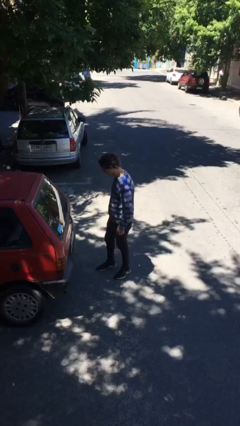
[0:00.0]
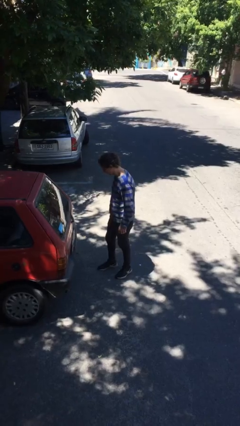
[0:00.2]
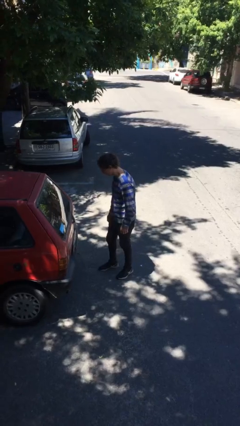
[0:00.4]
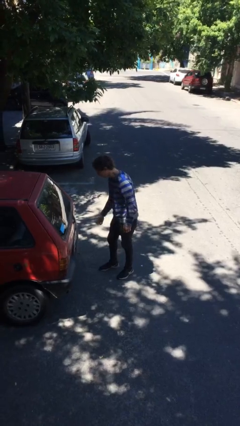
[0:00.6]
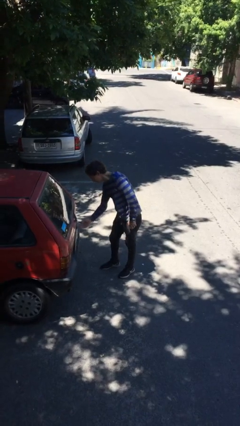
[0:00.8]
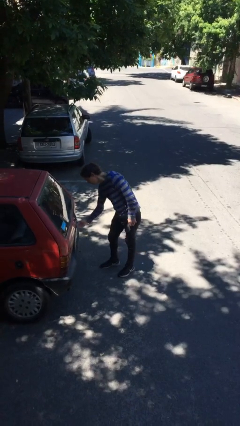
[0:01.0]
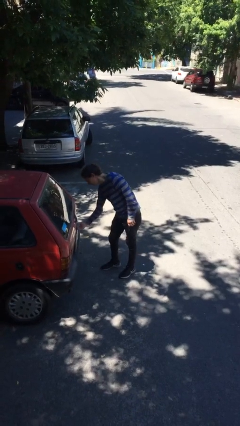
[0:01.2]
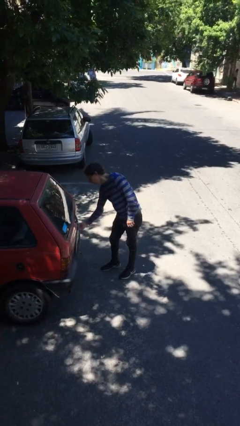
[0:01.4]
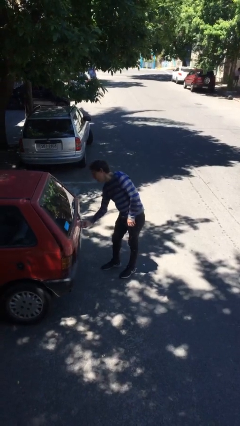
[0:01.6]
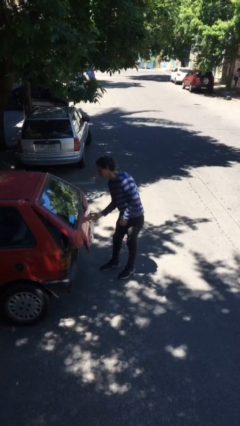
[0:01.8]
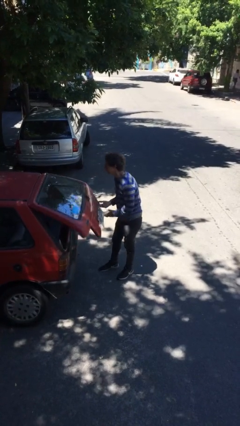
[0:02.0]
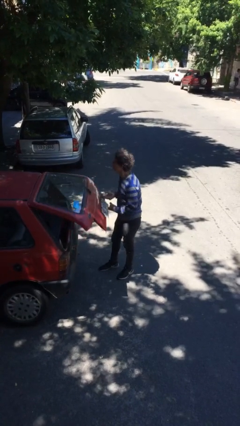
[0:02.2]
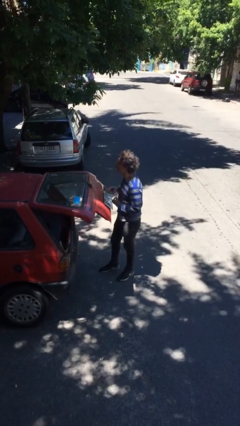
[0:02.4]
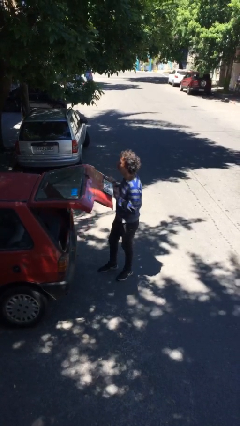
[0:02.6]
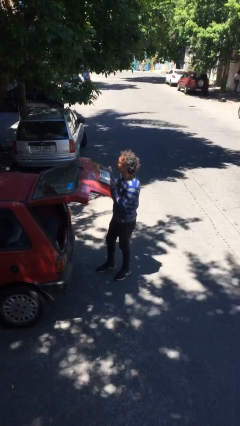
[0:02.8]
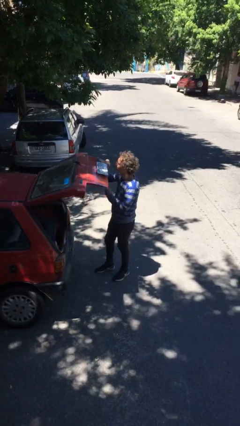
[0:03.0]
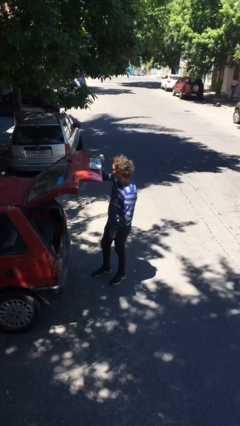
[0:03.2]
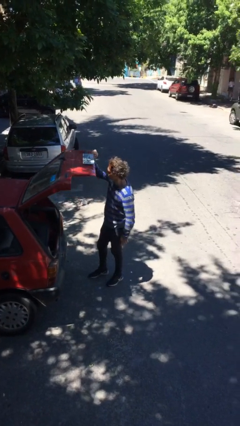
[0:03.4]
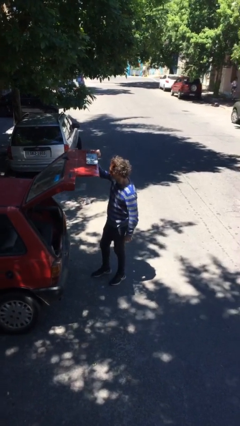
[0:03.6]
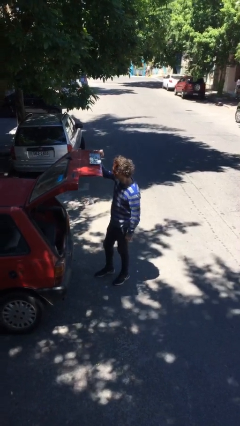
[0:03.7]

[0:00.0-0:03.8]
person opens car trunk

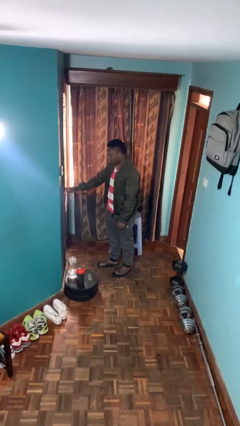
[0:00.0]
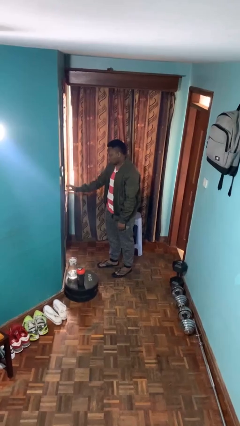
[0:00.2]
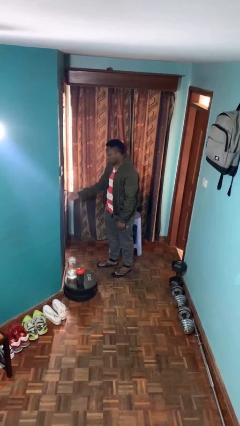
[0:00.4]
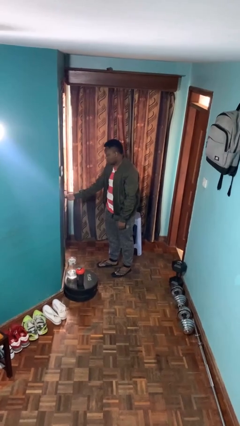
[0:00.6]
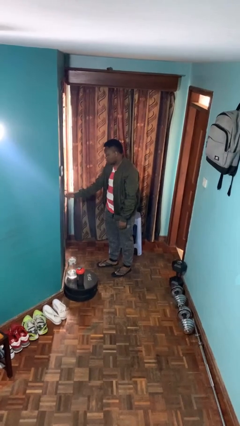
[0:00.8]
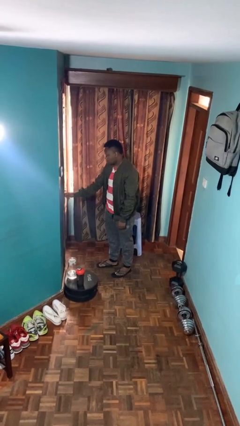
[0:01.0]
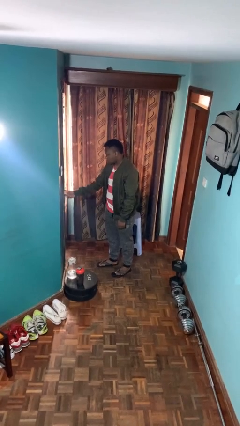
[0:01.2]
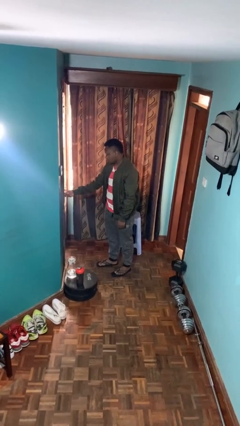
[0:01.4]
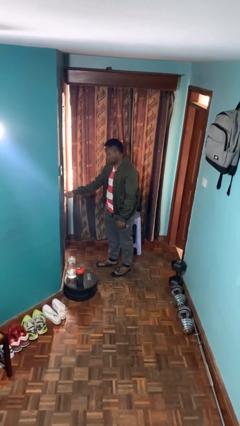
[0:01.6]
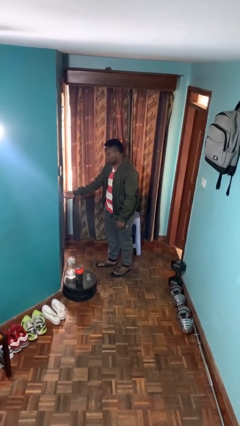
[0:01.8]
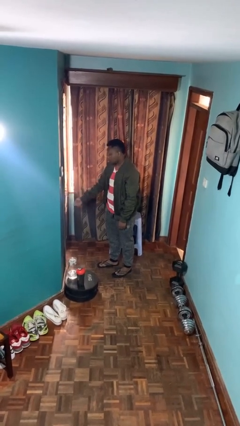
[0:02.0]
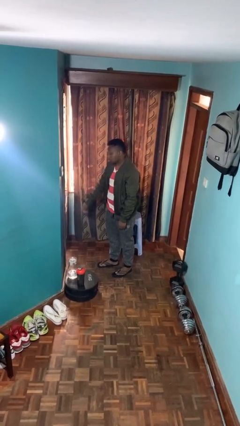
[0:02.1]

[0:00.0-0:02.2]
person locks door with keys

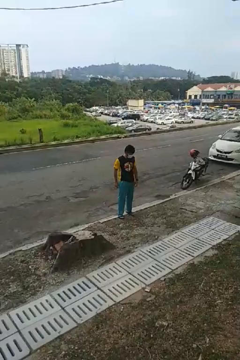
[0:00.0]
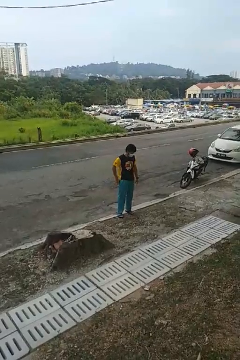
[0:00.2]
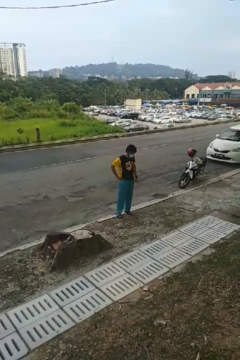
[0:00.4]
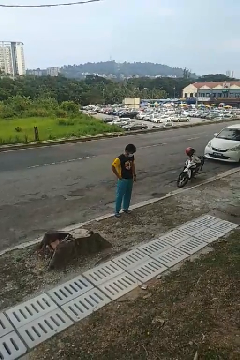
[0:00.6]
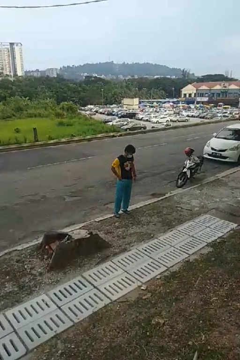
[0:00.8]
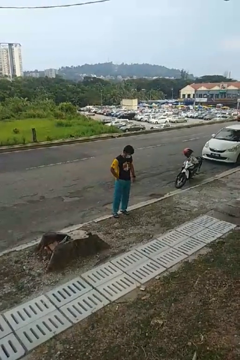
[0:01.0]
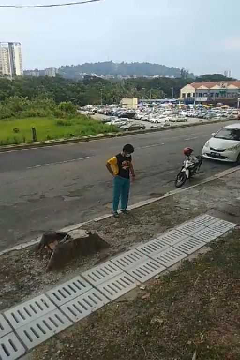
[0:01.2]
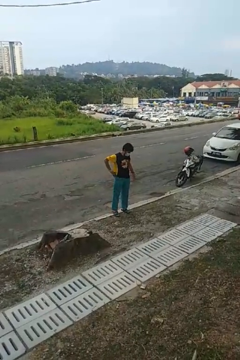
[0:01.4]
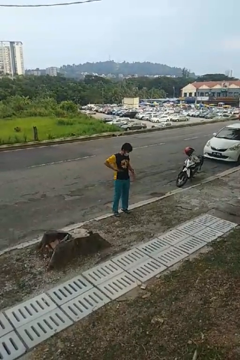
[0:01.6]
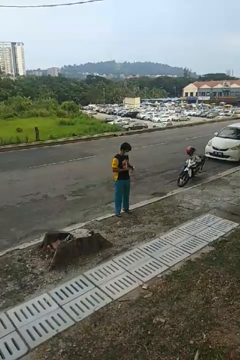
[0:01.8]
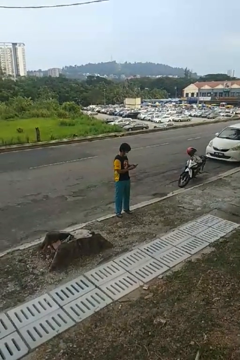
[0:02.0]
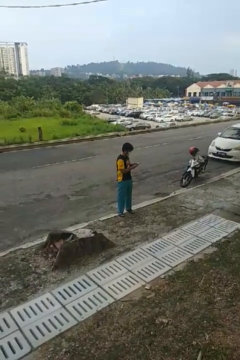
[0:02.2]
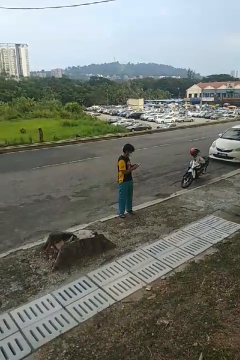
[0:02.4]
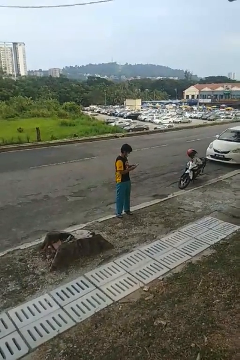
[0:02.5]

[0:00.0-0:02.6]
person takes phone from pocket

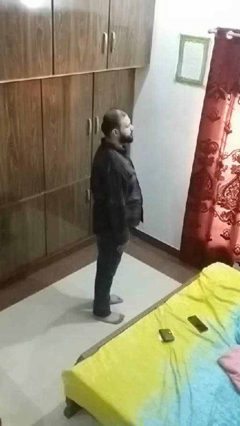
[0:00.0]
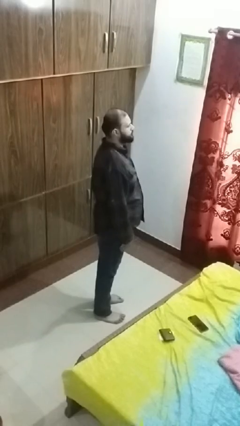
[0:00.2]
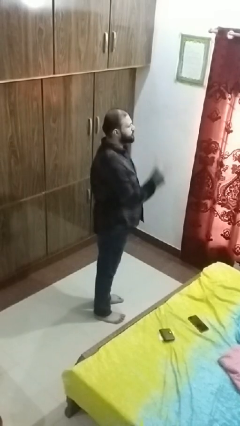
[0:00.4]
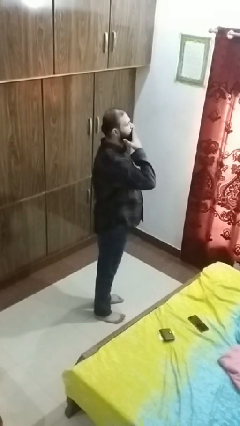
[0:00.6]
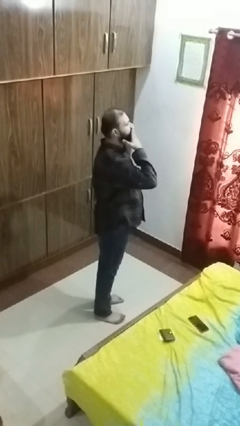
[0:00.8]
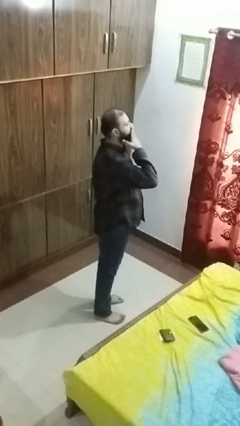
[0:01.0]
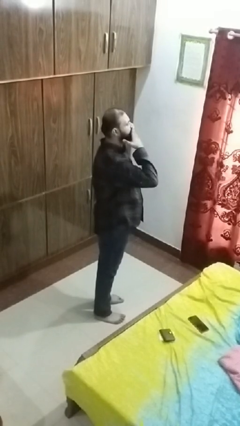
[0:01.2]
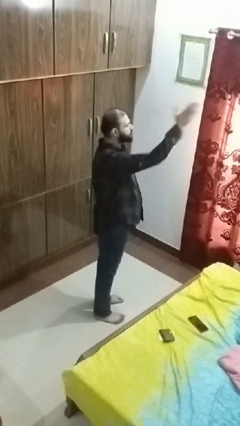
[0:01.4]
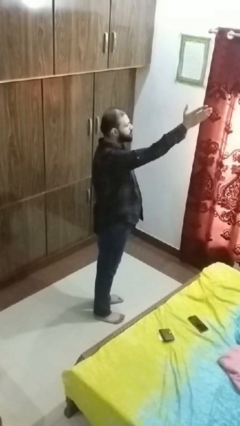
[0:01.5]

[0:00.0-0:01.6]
person gestures blow kiss

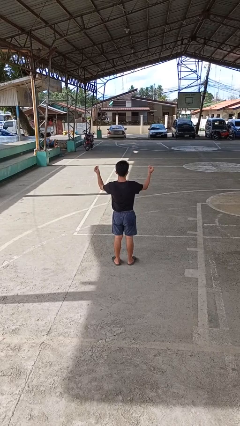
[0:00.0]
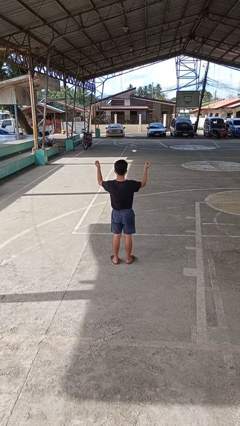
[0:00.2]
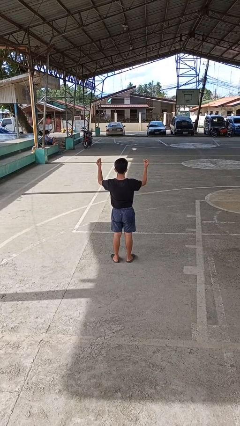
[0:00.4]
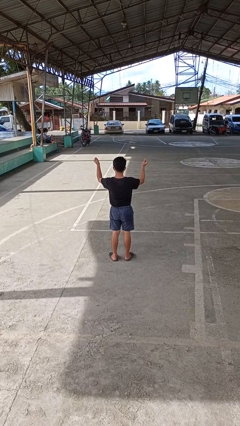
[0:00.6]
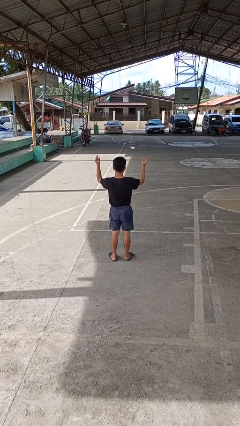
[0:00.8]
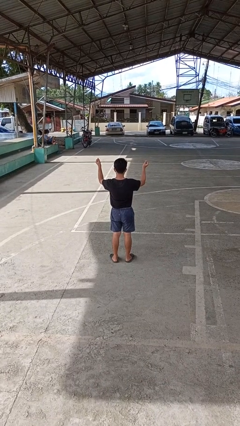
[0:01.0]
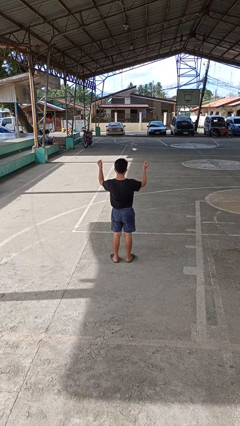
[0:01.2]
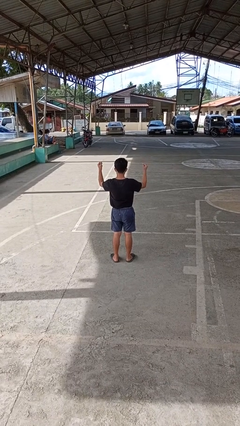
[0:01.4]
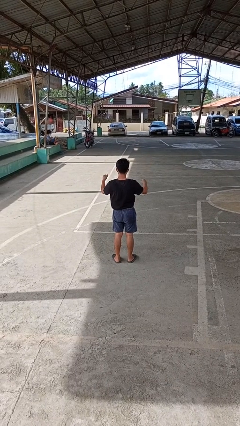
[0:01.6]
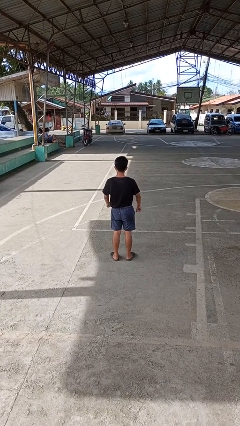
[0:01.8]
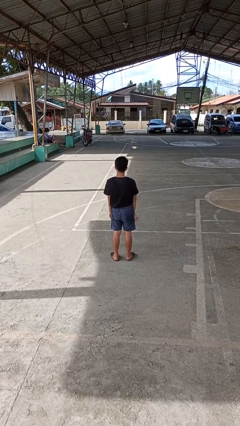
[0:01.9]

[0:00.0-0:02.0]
person snaps fingers

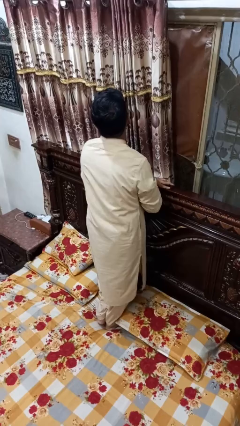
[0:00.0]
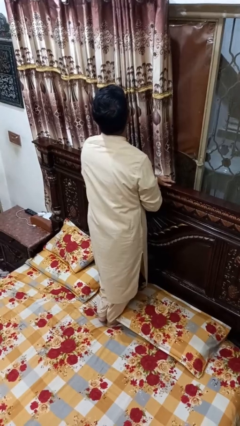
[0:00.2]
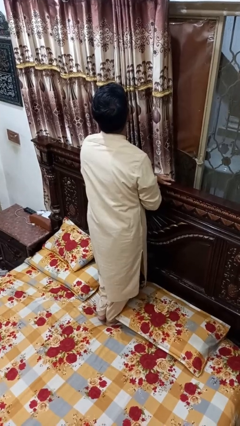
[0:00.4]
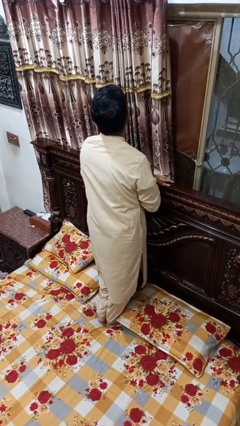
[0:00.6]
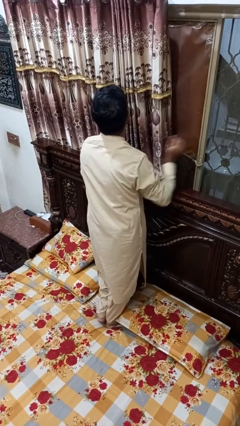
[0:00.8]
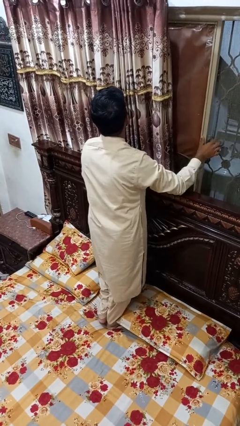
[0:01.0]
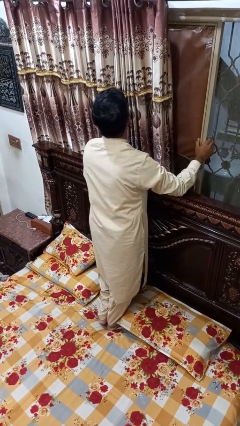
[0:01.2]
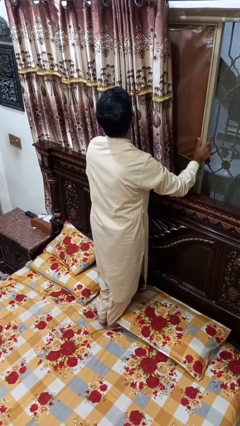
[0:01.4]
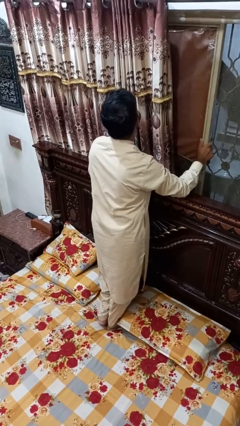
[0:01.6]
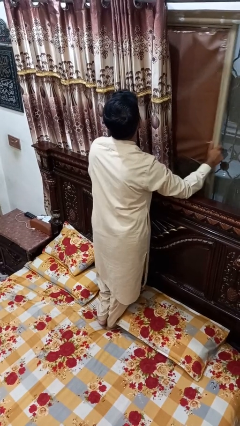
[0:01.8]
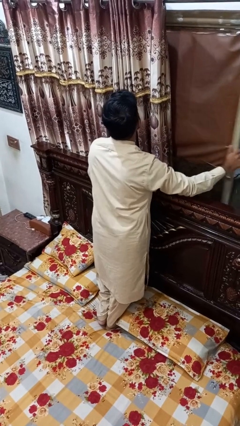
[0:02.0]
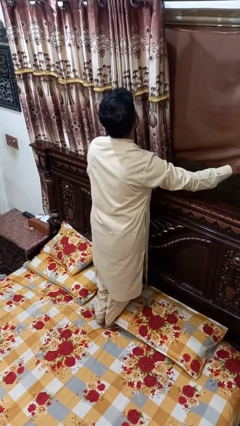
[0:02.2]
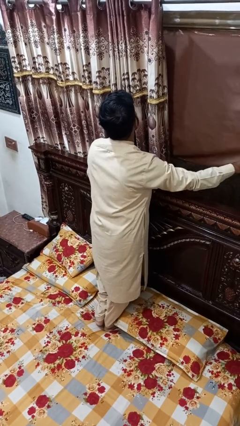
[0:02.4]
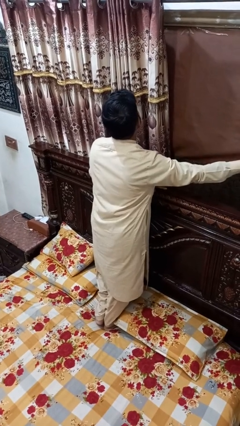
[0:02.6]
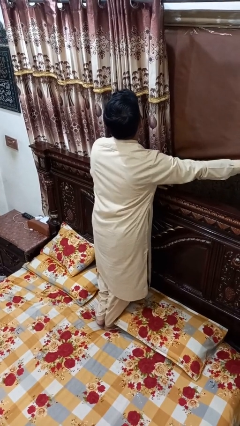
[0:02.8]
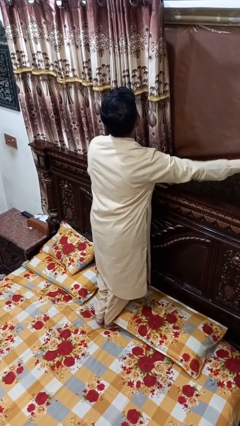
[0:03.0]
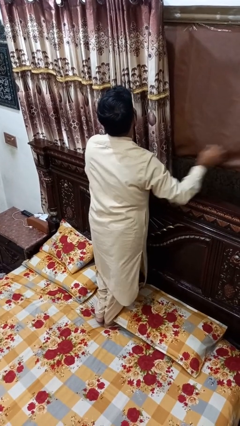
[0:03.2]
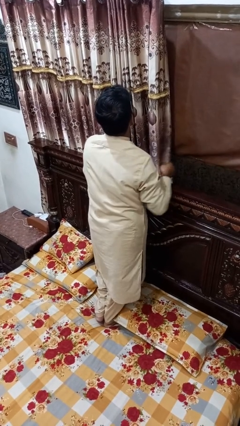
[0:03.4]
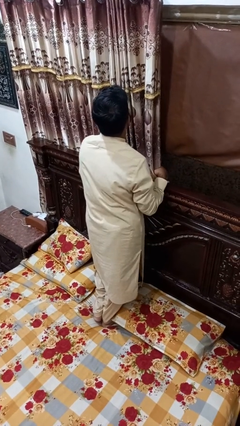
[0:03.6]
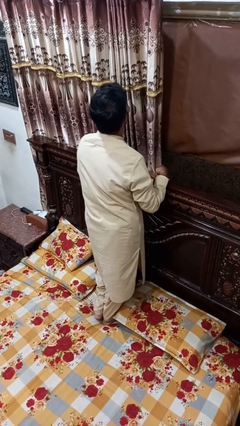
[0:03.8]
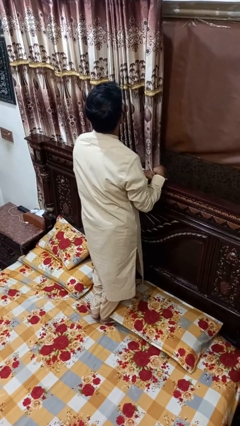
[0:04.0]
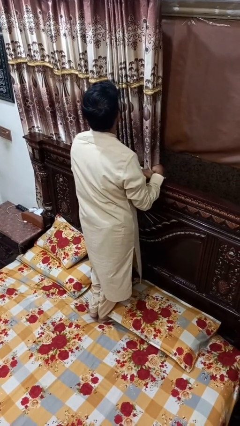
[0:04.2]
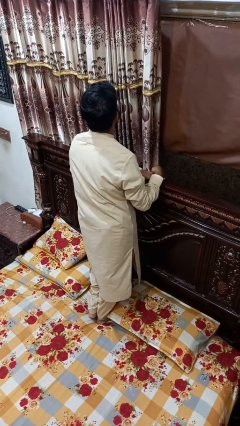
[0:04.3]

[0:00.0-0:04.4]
person closes home window

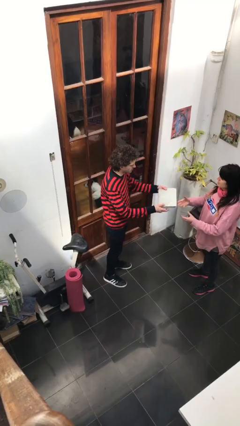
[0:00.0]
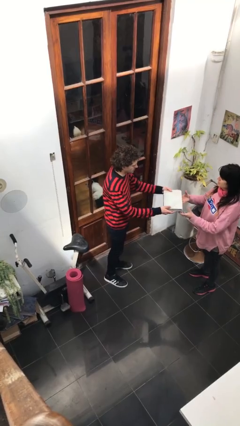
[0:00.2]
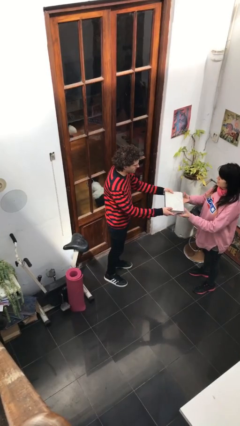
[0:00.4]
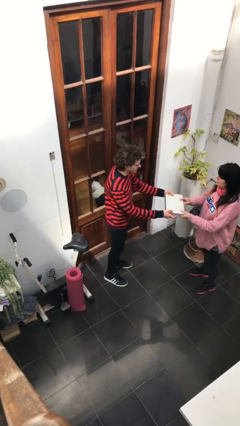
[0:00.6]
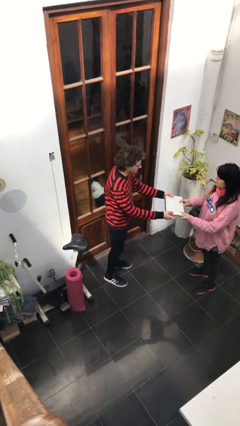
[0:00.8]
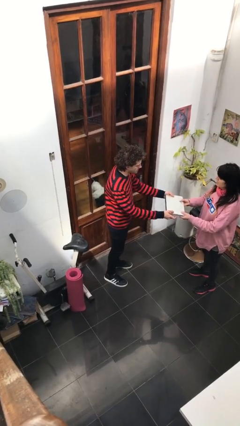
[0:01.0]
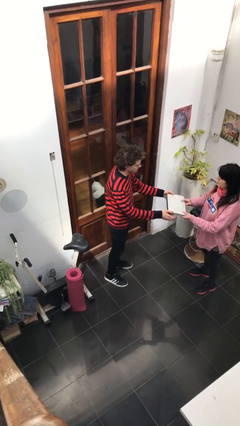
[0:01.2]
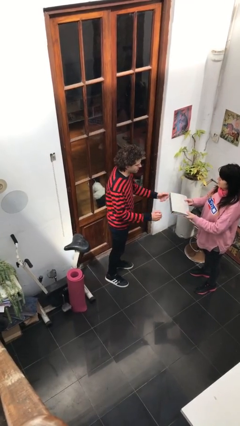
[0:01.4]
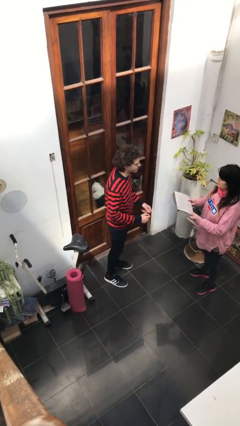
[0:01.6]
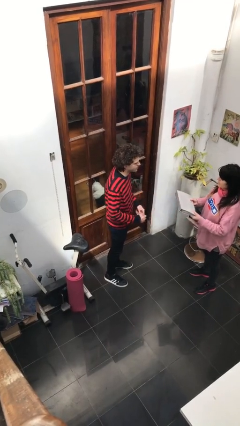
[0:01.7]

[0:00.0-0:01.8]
person transfers object to person
